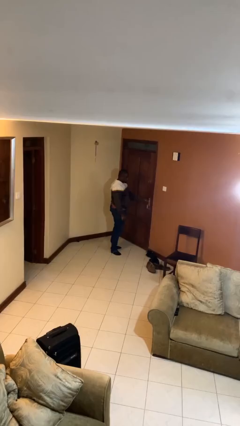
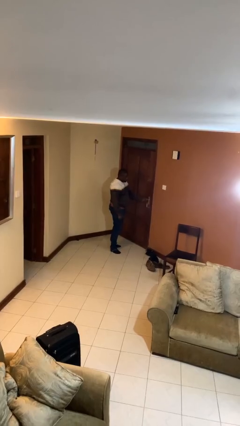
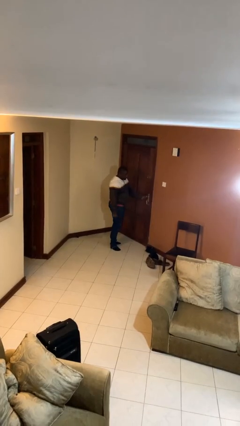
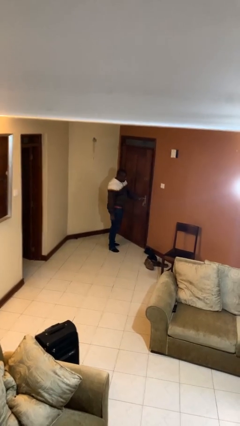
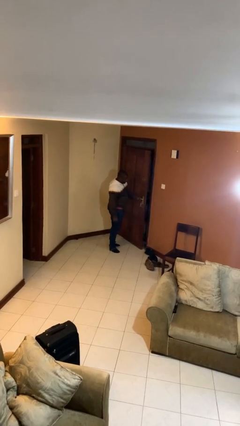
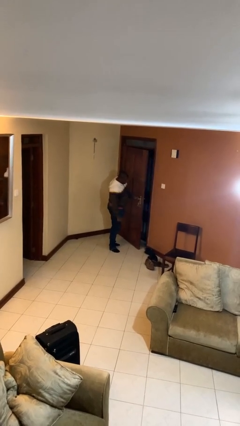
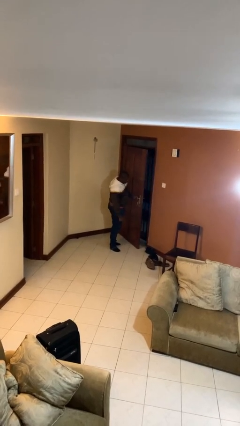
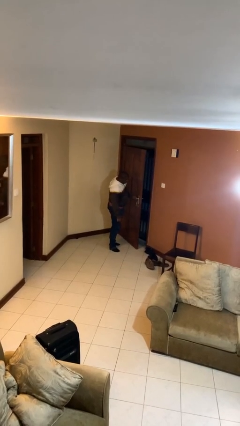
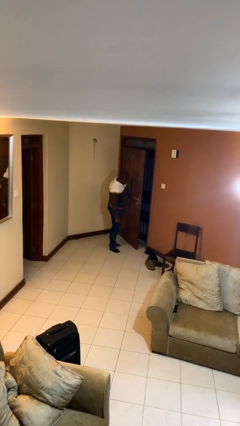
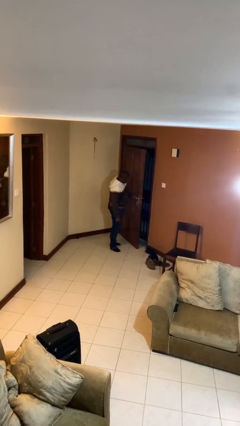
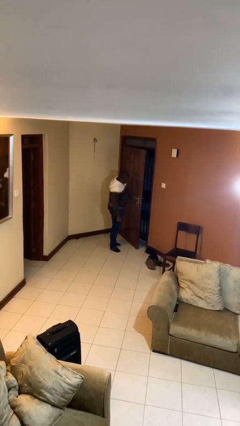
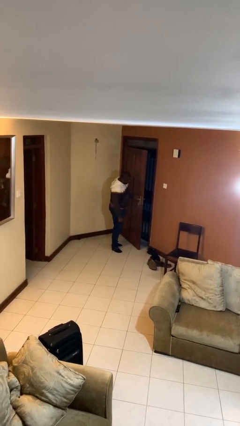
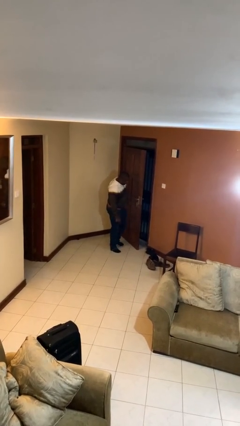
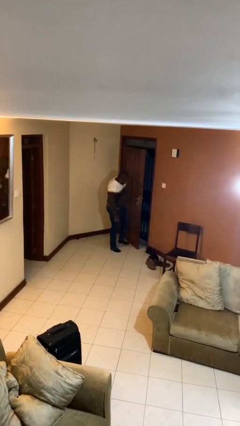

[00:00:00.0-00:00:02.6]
person opens facility door

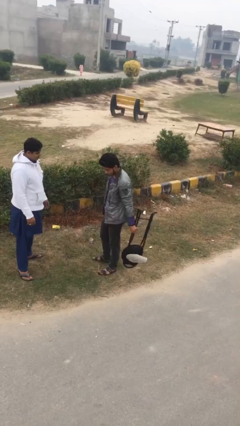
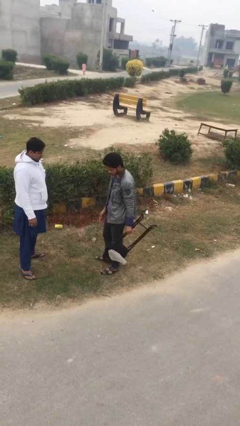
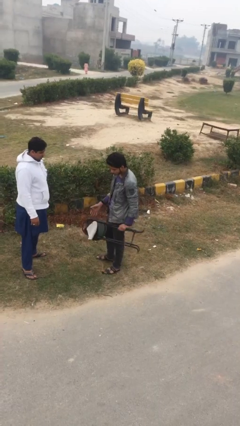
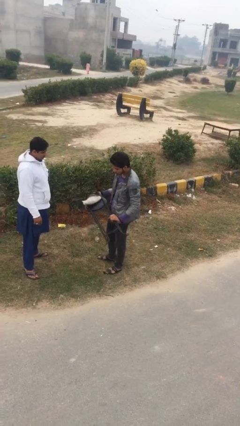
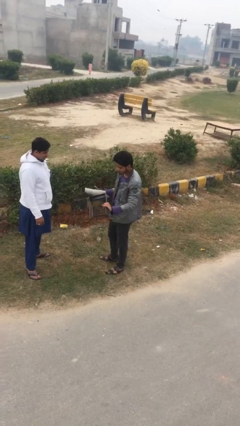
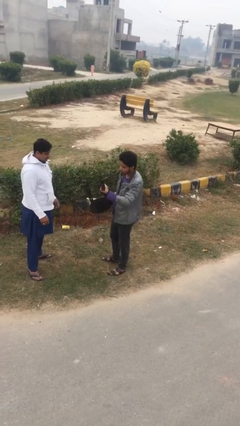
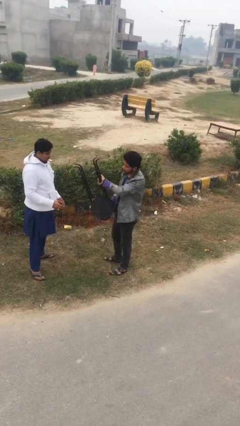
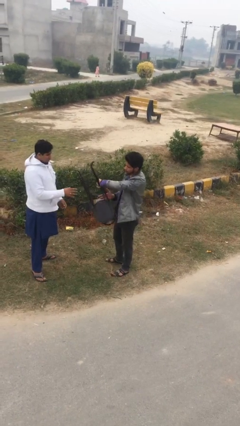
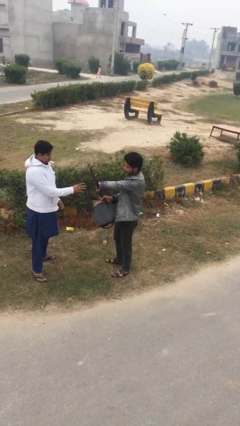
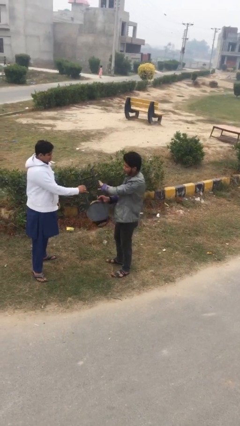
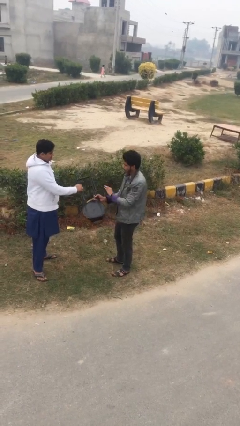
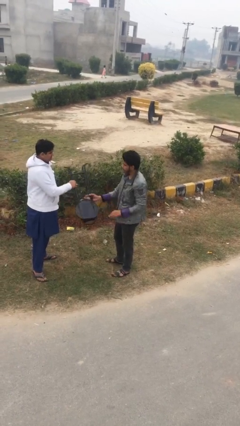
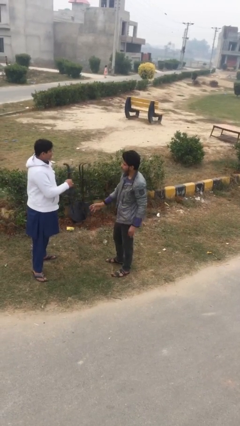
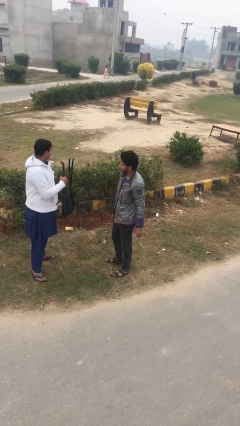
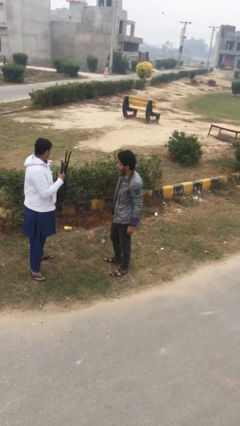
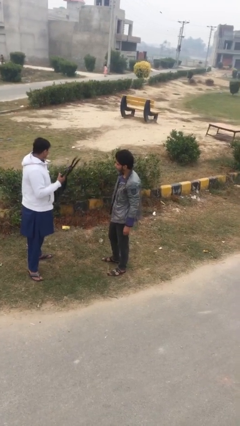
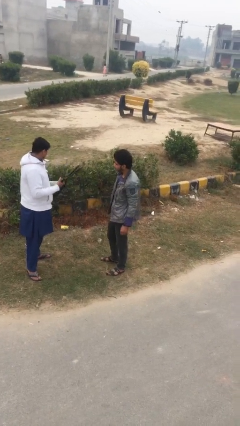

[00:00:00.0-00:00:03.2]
person transfers object to person

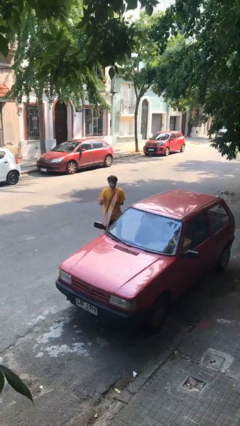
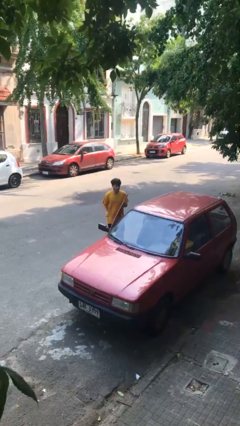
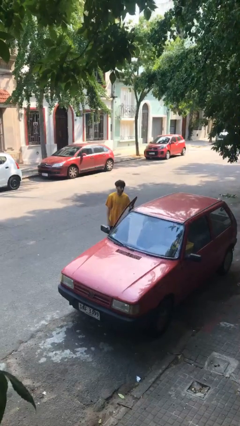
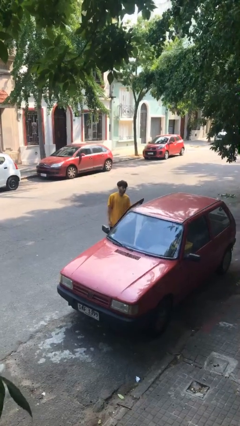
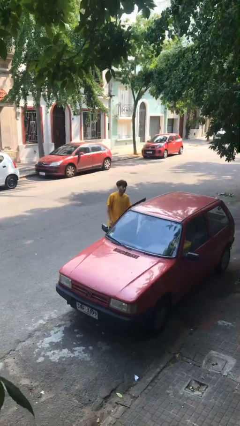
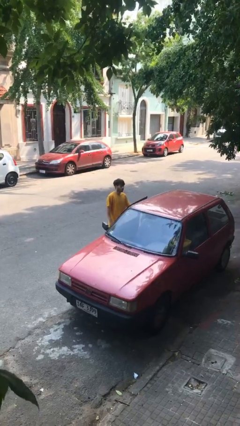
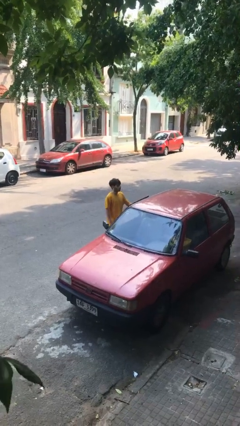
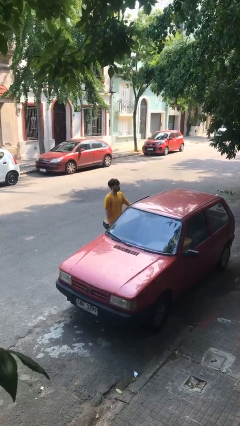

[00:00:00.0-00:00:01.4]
person closes car door

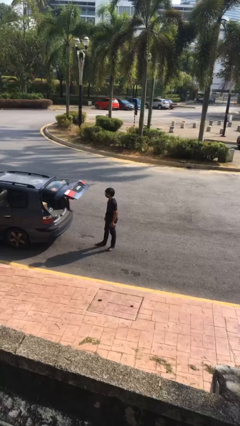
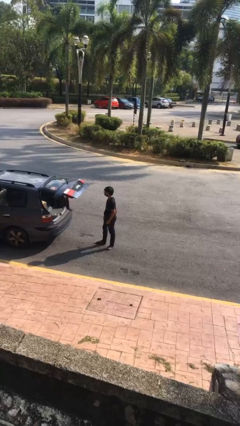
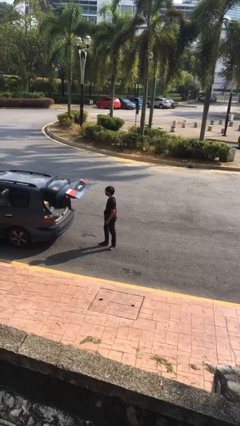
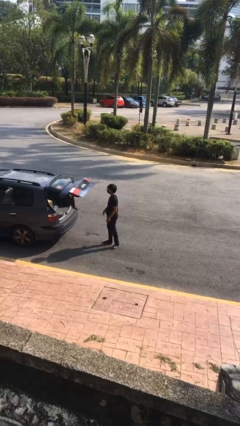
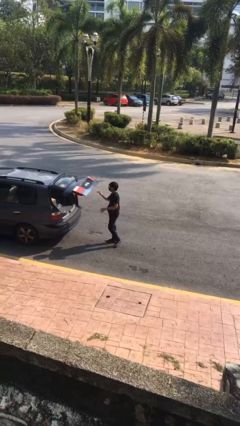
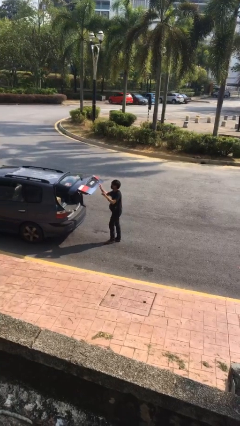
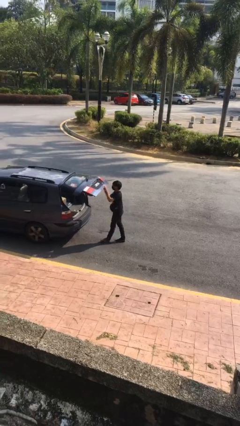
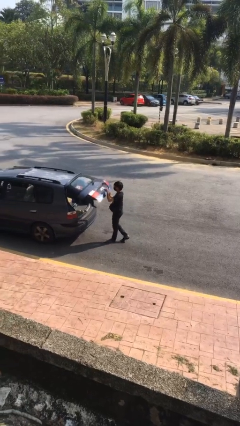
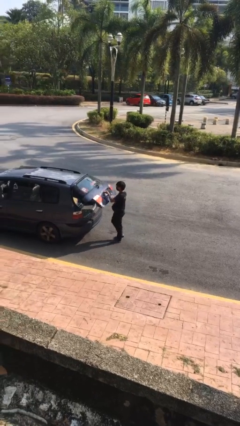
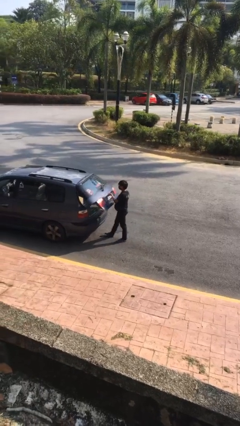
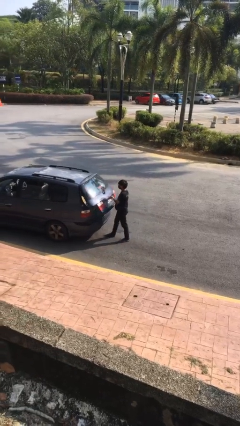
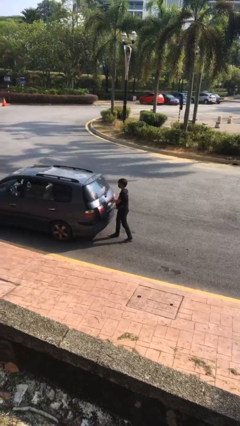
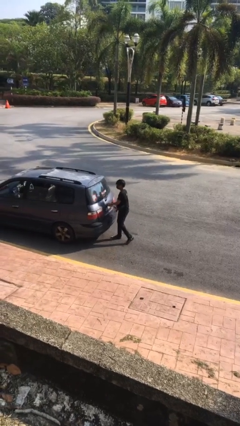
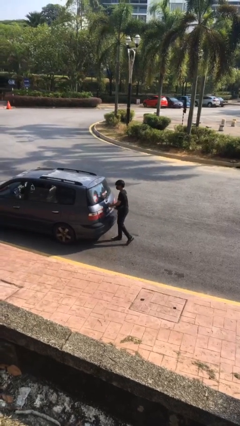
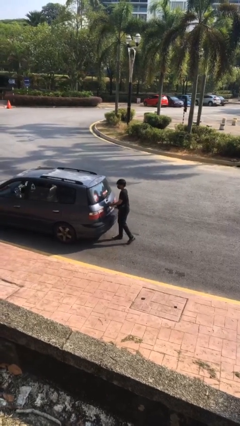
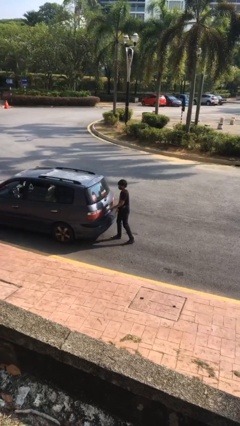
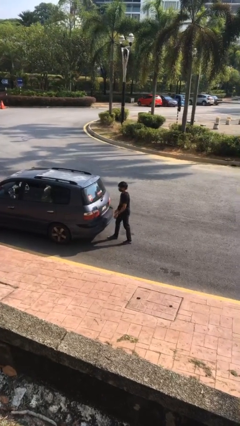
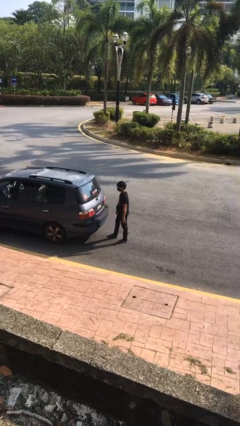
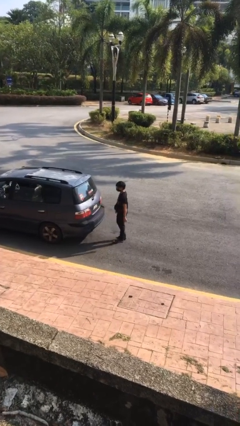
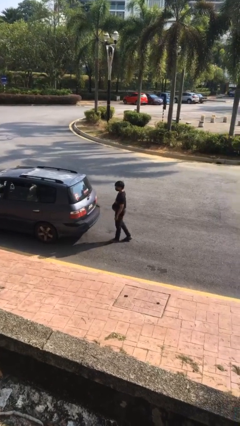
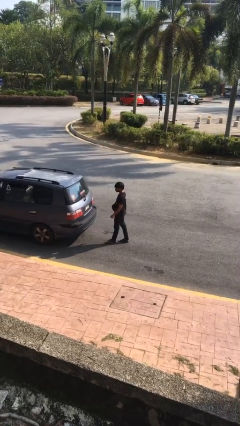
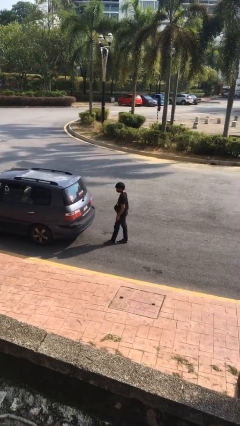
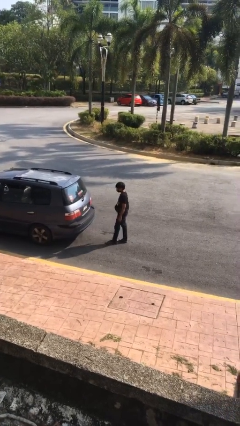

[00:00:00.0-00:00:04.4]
person closes car trunk

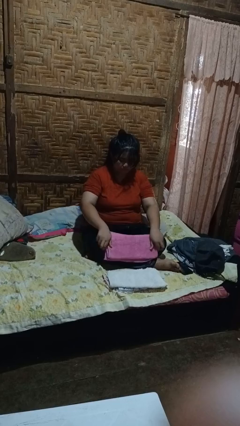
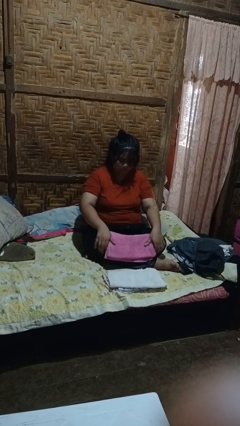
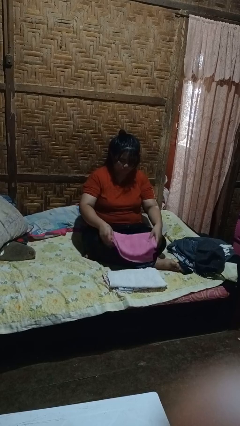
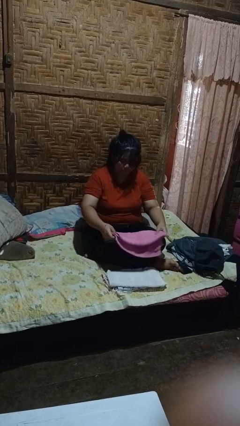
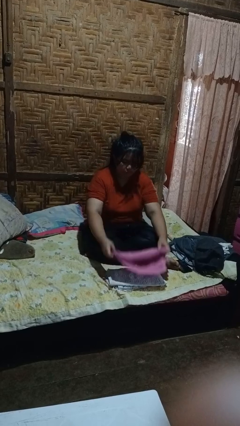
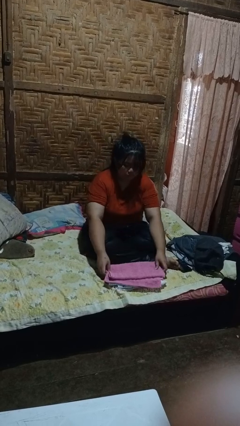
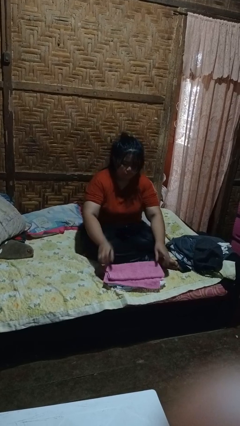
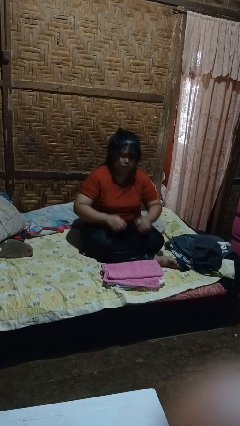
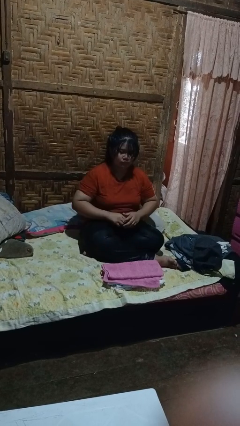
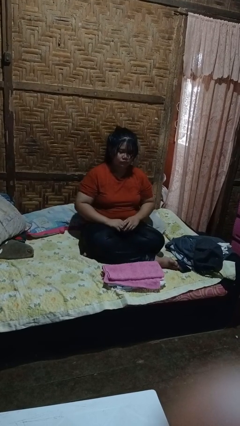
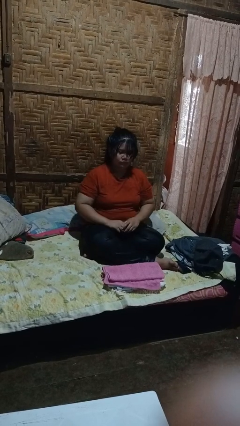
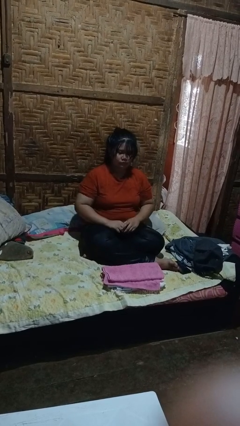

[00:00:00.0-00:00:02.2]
person folds towel

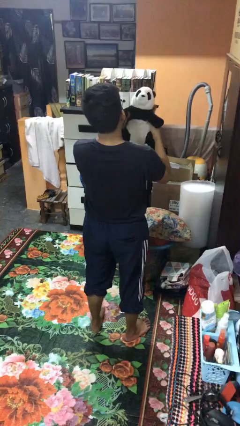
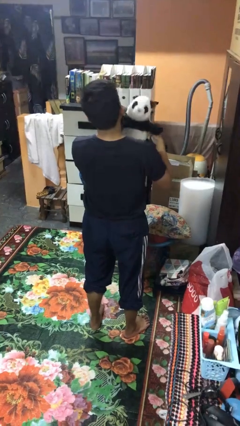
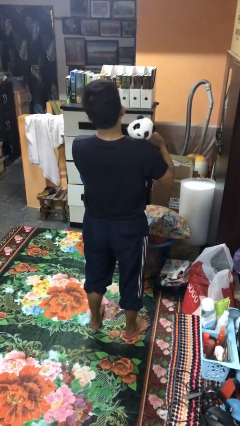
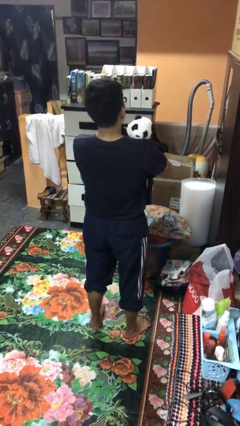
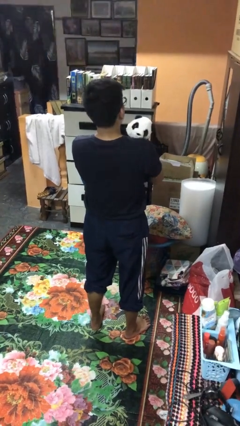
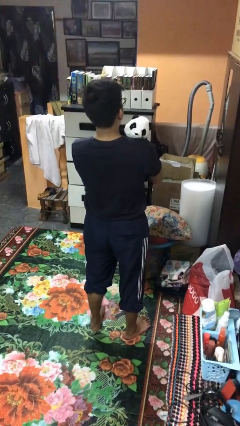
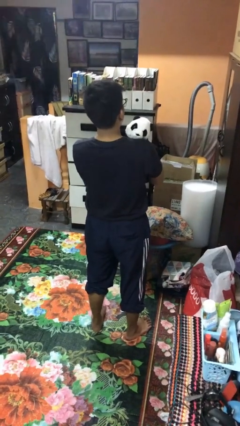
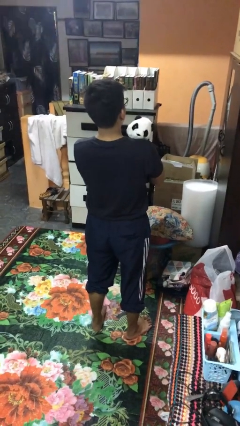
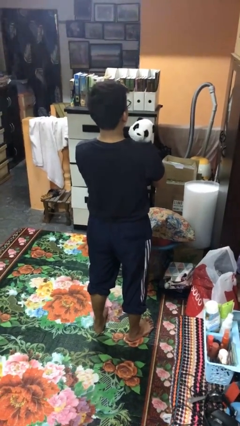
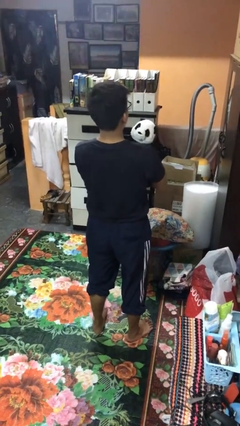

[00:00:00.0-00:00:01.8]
person hugs stuffed animal

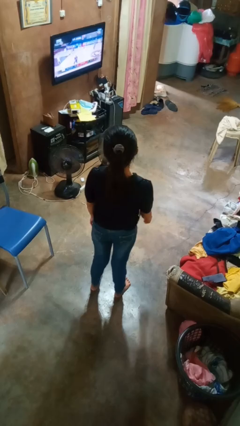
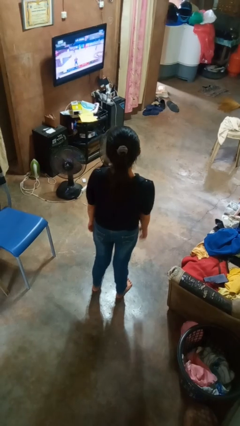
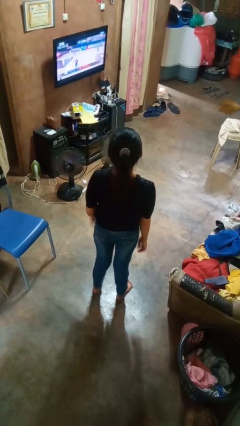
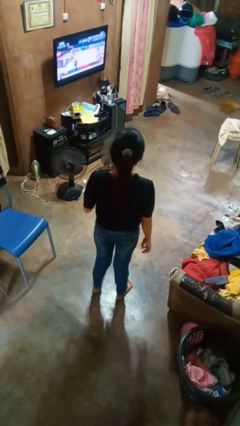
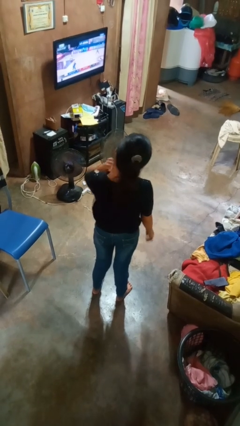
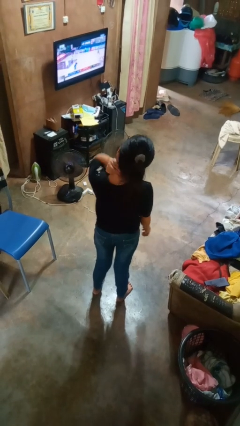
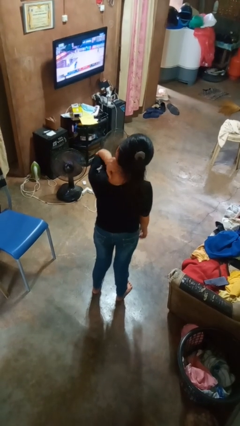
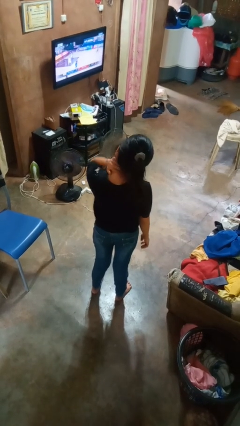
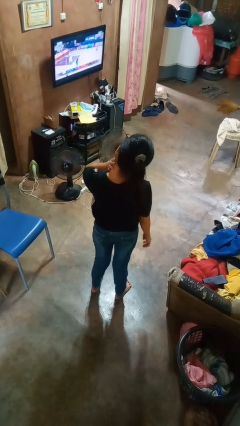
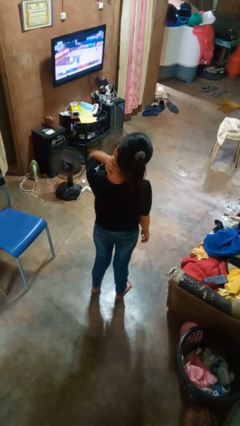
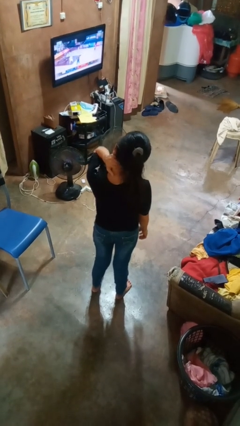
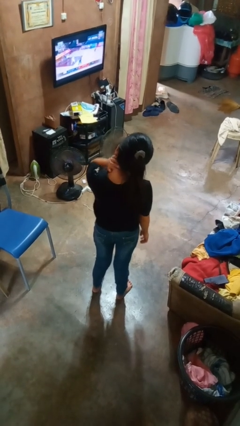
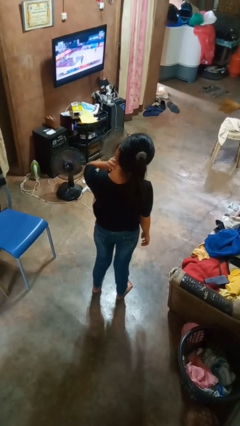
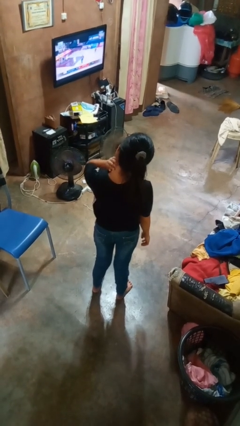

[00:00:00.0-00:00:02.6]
person rubs neck
